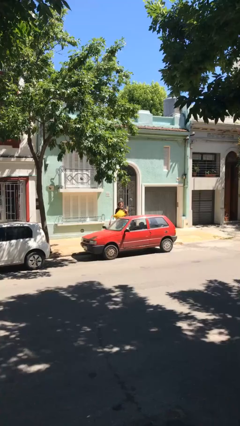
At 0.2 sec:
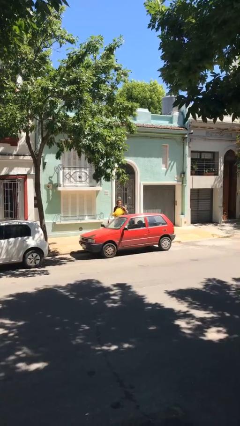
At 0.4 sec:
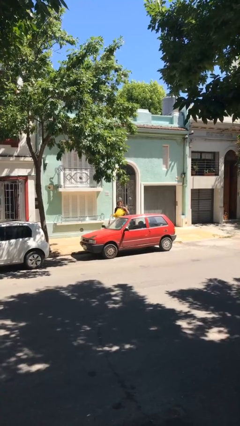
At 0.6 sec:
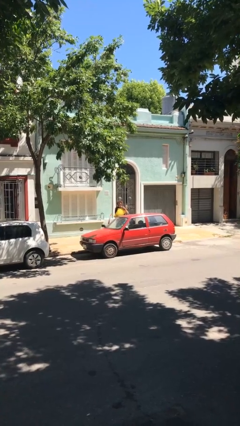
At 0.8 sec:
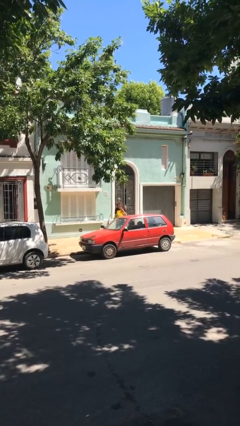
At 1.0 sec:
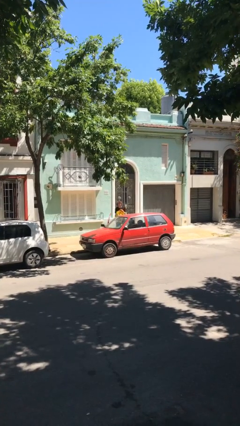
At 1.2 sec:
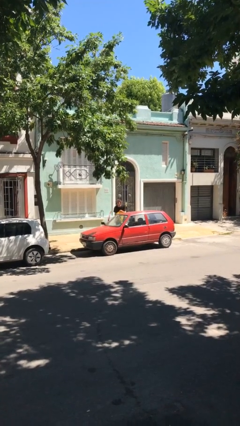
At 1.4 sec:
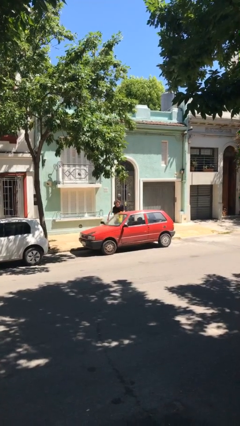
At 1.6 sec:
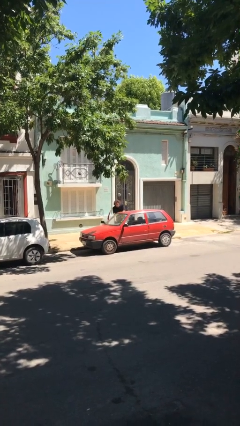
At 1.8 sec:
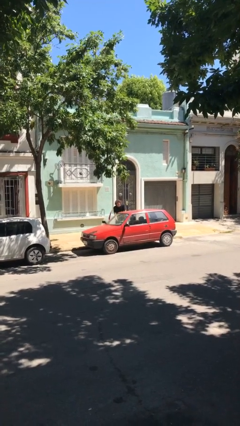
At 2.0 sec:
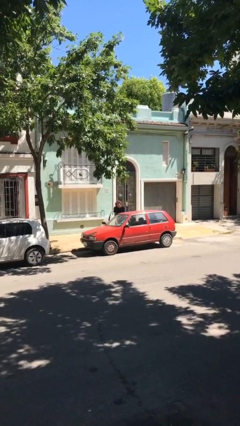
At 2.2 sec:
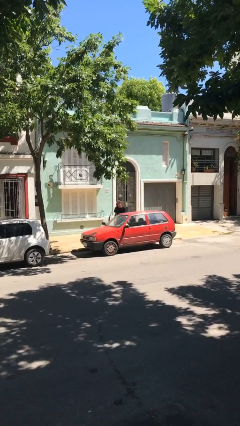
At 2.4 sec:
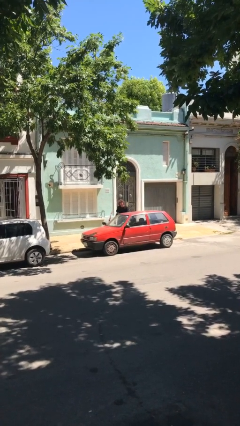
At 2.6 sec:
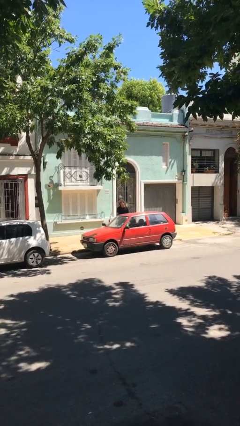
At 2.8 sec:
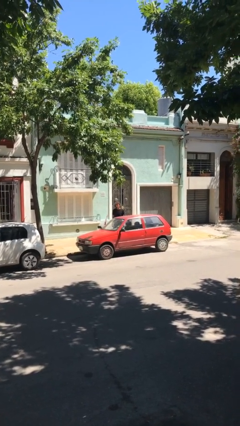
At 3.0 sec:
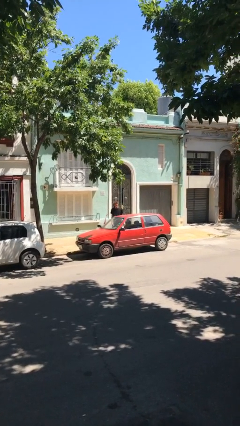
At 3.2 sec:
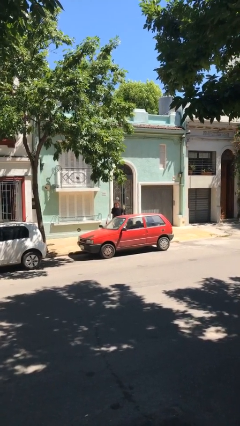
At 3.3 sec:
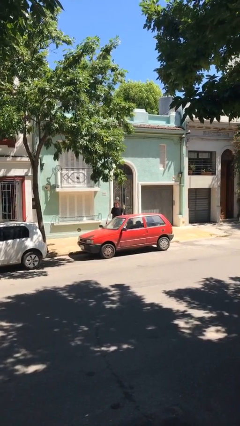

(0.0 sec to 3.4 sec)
person loads car

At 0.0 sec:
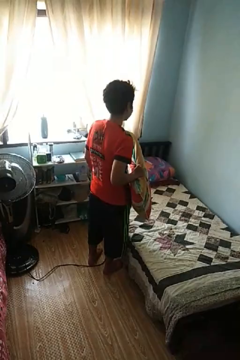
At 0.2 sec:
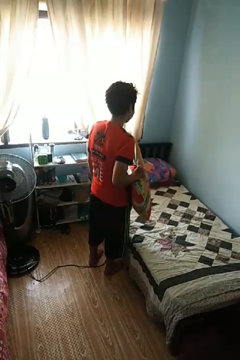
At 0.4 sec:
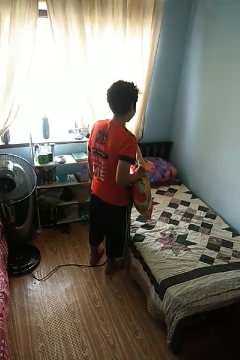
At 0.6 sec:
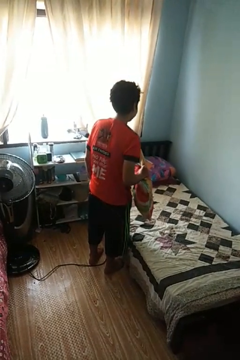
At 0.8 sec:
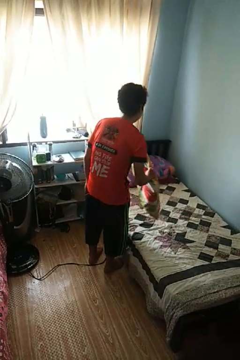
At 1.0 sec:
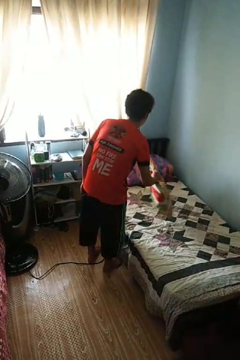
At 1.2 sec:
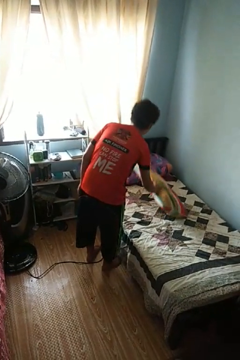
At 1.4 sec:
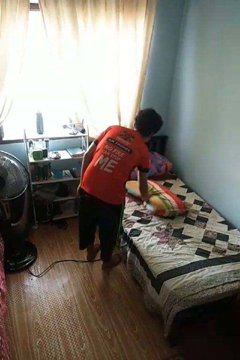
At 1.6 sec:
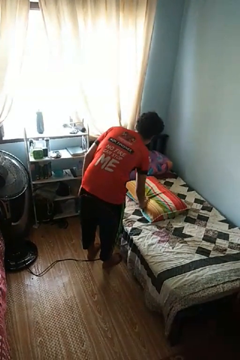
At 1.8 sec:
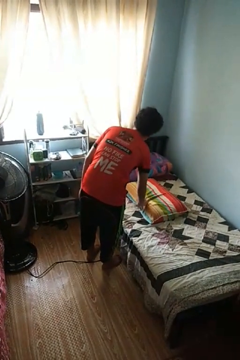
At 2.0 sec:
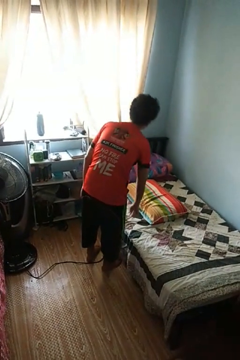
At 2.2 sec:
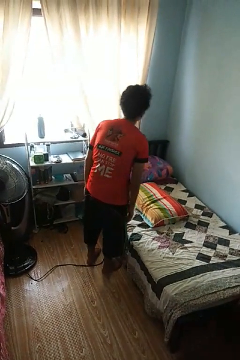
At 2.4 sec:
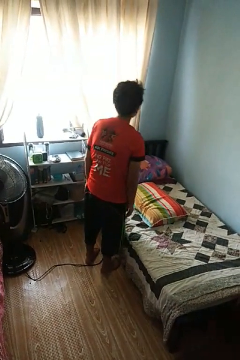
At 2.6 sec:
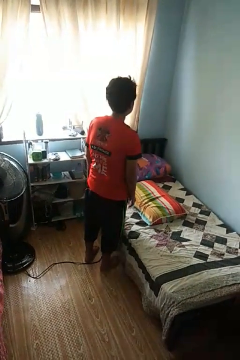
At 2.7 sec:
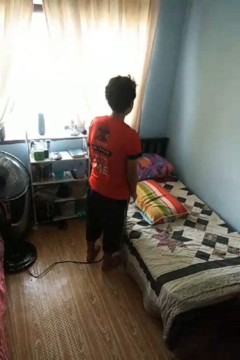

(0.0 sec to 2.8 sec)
person puts down object on bed

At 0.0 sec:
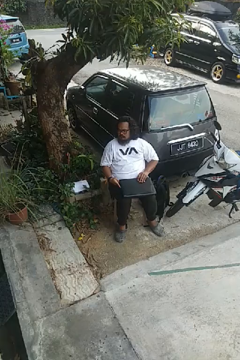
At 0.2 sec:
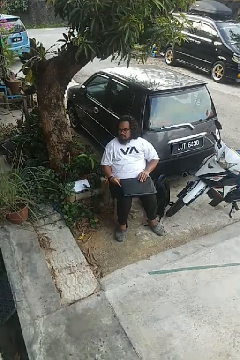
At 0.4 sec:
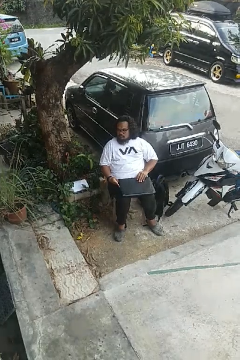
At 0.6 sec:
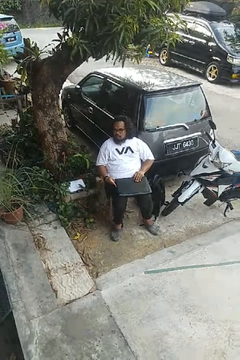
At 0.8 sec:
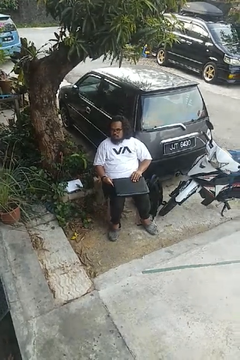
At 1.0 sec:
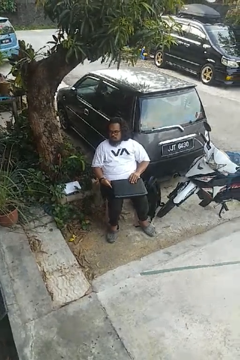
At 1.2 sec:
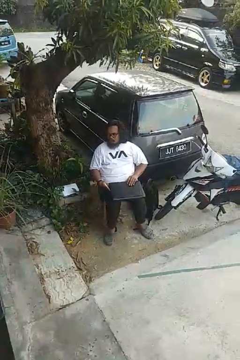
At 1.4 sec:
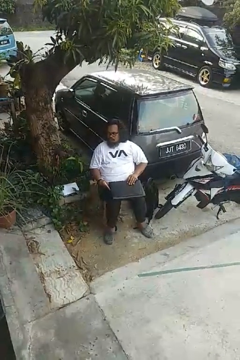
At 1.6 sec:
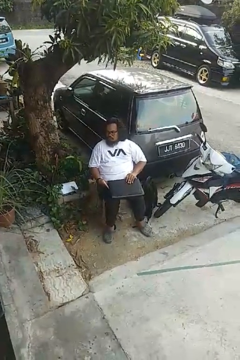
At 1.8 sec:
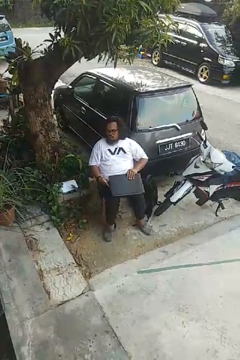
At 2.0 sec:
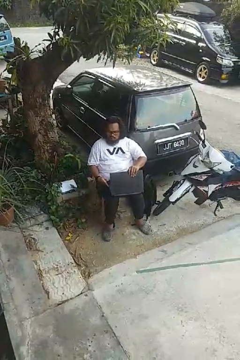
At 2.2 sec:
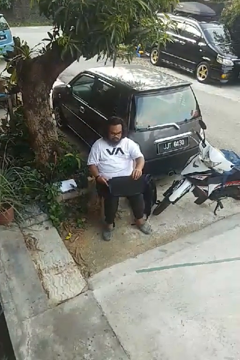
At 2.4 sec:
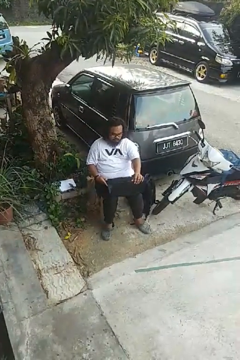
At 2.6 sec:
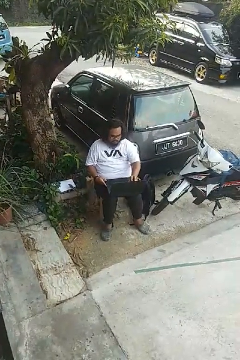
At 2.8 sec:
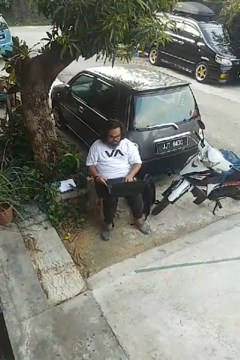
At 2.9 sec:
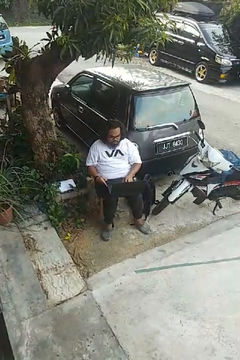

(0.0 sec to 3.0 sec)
person opens laptop

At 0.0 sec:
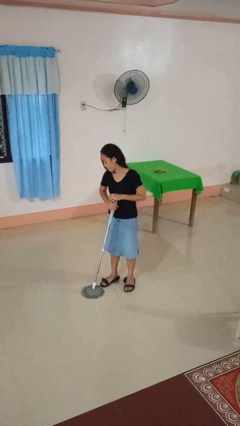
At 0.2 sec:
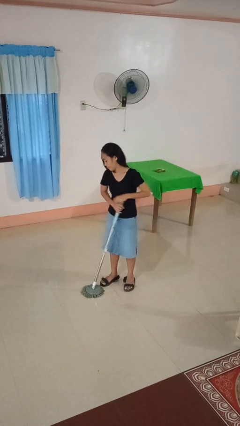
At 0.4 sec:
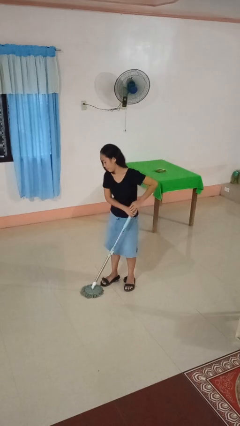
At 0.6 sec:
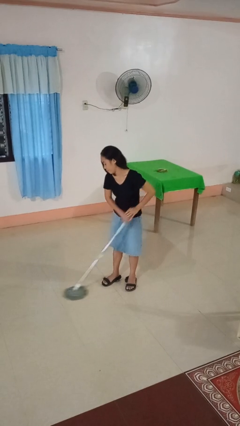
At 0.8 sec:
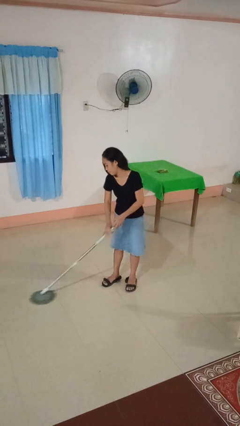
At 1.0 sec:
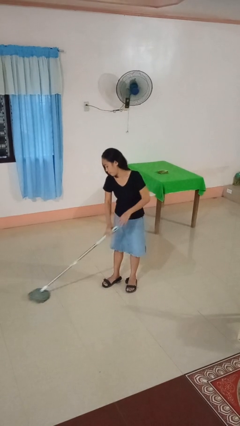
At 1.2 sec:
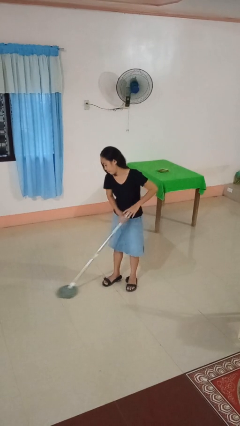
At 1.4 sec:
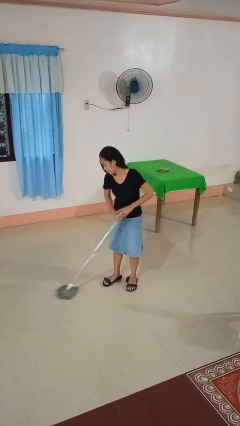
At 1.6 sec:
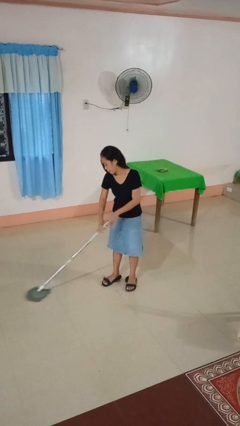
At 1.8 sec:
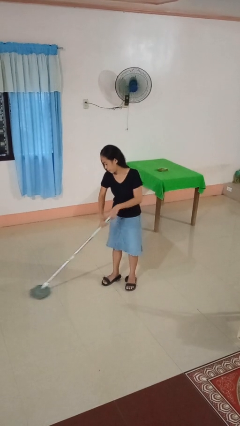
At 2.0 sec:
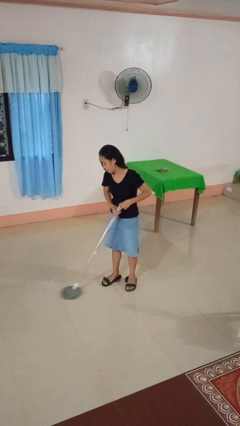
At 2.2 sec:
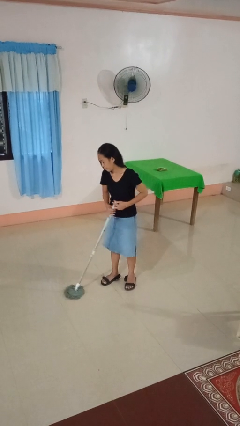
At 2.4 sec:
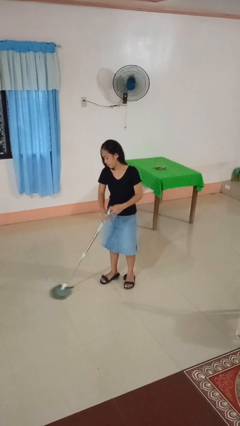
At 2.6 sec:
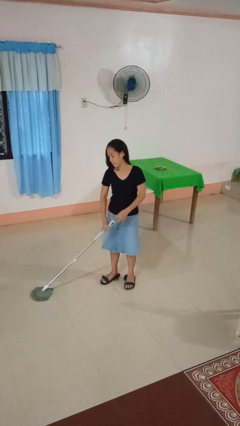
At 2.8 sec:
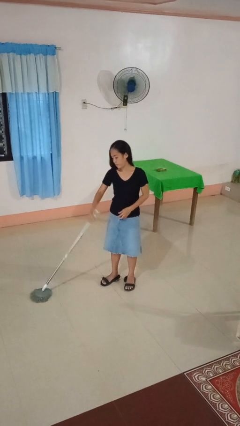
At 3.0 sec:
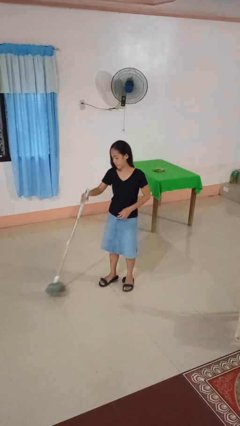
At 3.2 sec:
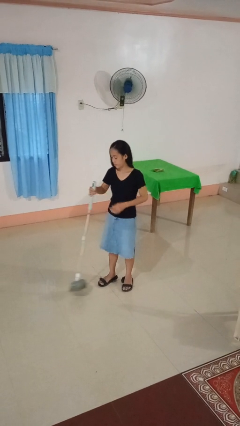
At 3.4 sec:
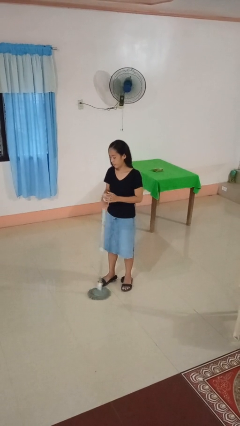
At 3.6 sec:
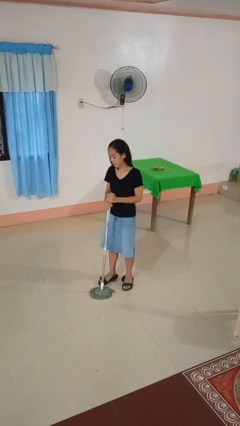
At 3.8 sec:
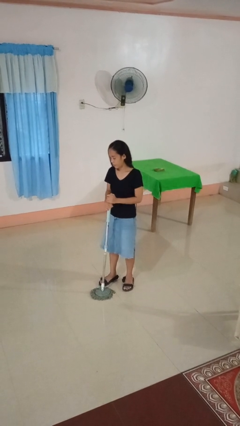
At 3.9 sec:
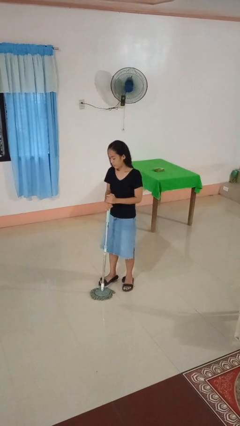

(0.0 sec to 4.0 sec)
person mops

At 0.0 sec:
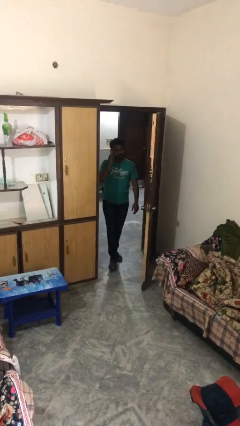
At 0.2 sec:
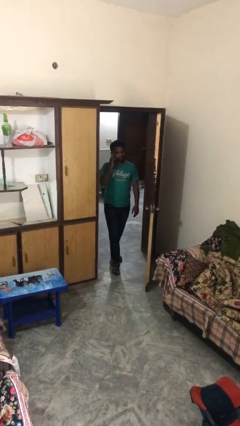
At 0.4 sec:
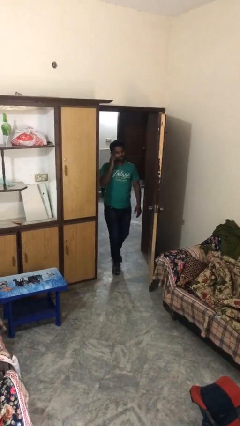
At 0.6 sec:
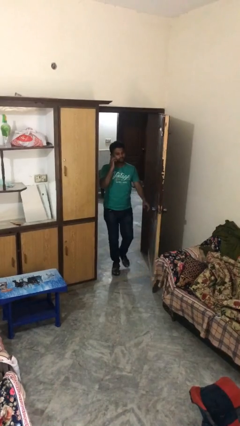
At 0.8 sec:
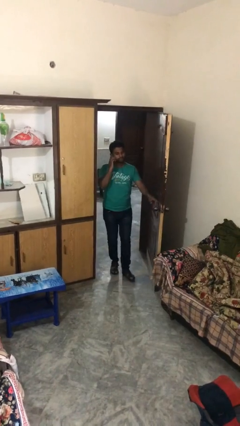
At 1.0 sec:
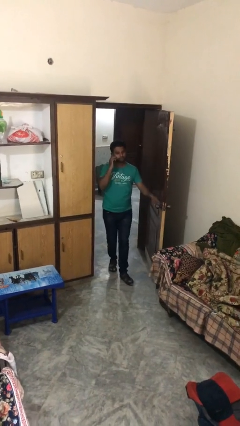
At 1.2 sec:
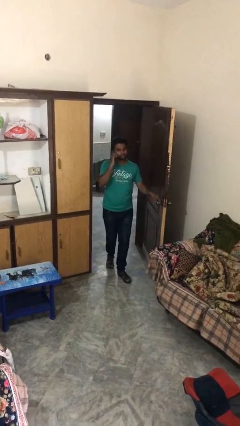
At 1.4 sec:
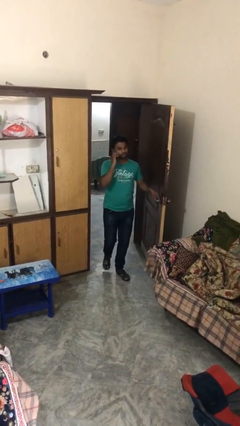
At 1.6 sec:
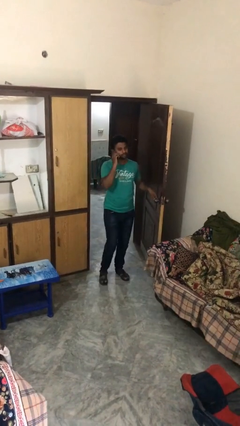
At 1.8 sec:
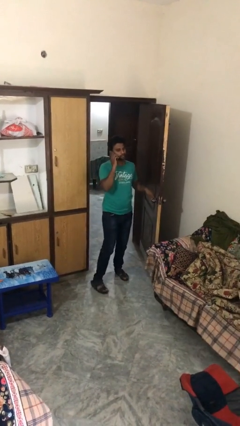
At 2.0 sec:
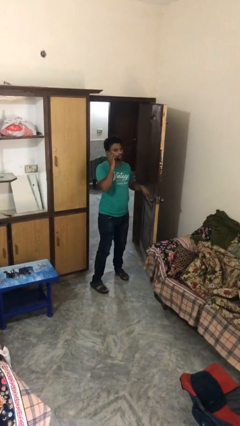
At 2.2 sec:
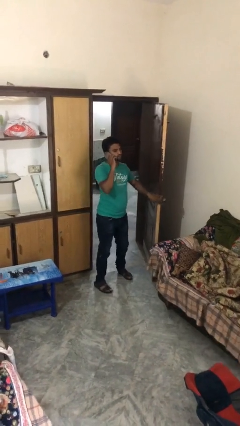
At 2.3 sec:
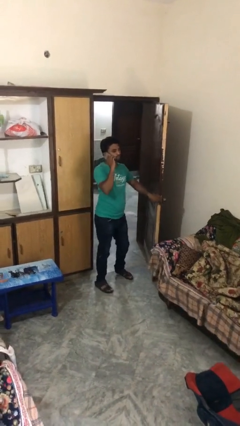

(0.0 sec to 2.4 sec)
person enters scene through structure

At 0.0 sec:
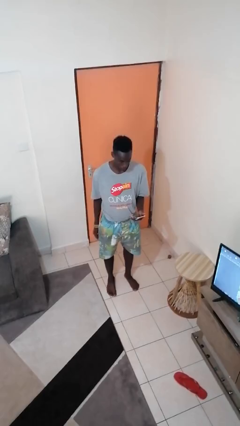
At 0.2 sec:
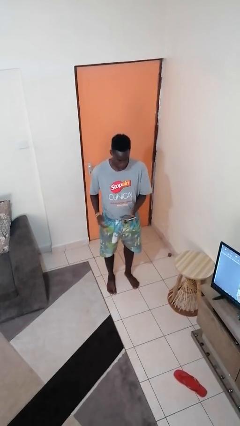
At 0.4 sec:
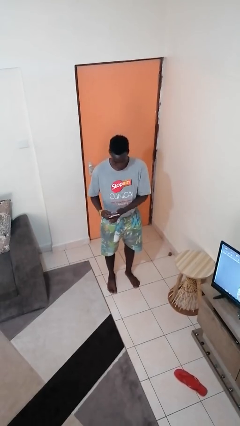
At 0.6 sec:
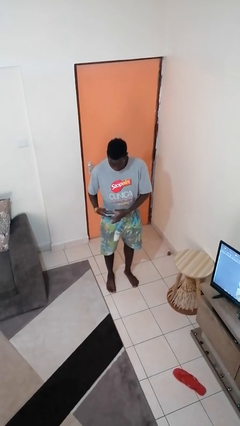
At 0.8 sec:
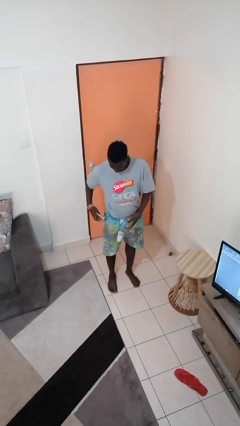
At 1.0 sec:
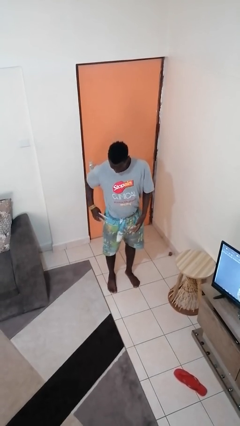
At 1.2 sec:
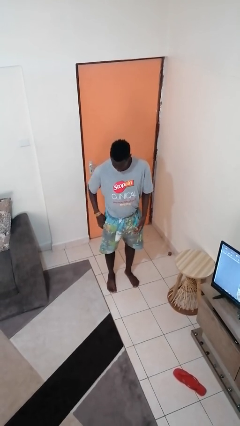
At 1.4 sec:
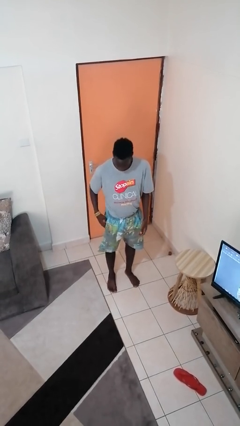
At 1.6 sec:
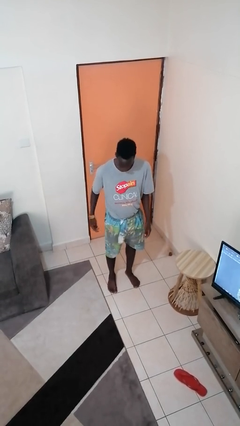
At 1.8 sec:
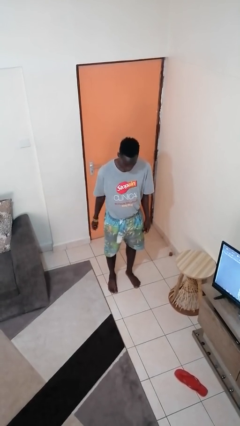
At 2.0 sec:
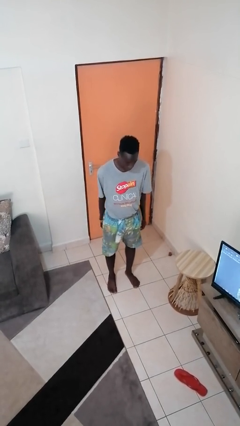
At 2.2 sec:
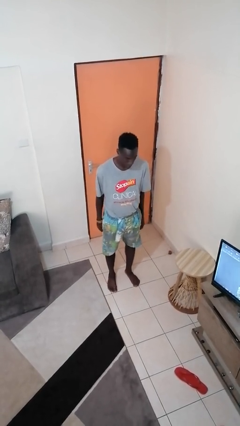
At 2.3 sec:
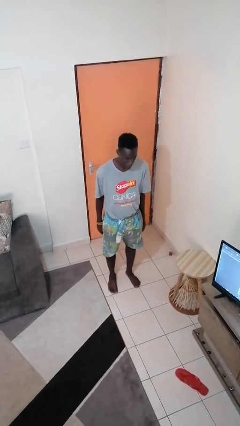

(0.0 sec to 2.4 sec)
person puts phone into pocket

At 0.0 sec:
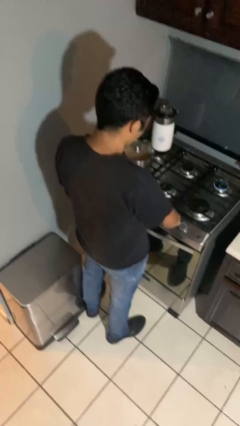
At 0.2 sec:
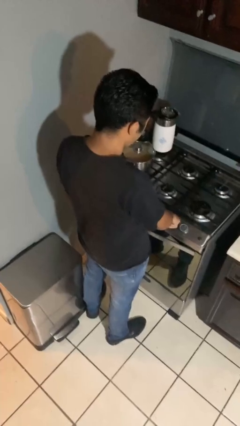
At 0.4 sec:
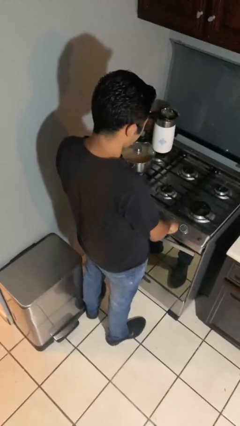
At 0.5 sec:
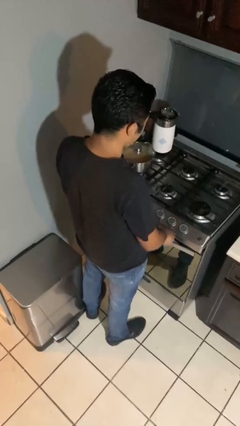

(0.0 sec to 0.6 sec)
person turns off stovetop
